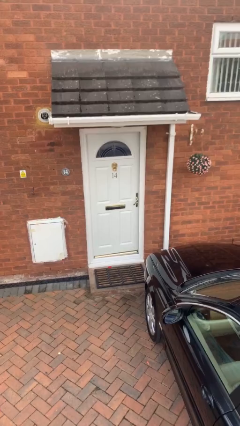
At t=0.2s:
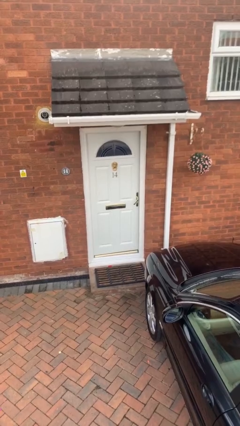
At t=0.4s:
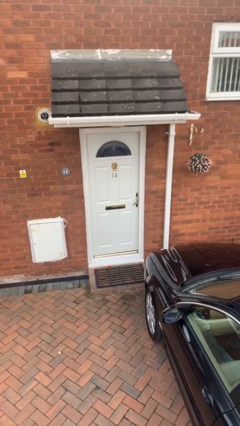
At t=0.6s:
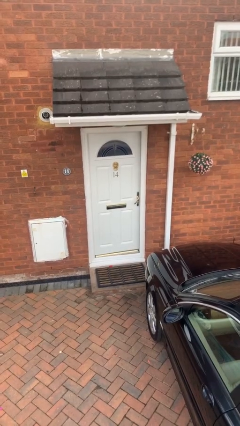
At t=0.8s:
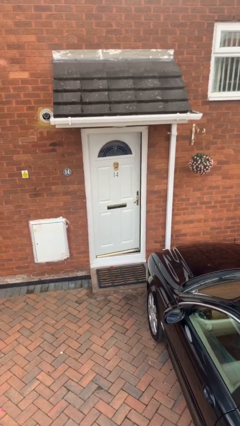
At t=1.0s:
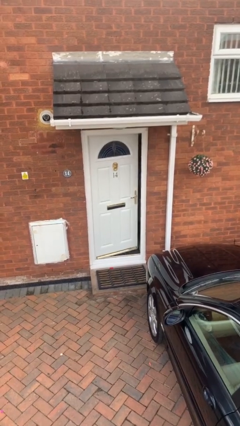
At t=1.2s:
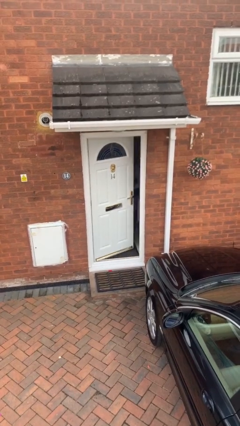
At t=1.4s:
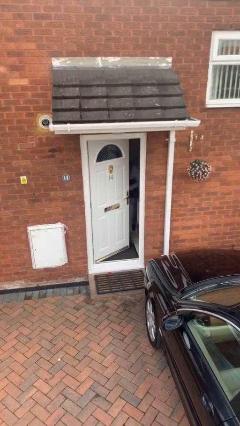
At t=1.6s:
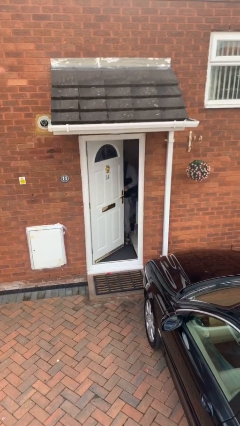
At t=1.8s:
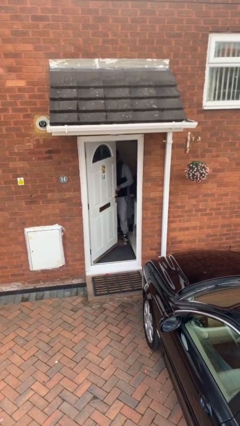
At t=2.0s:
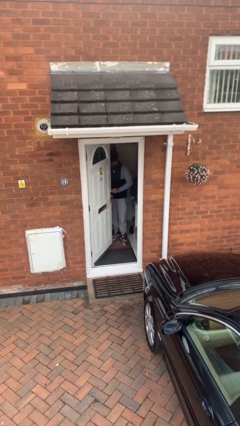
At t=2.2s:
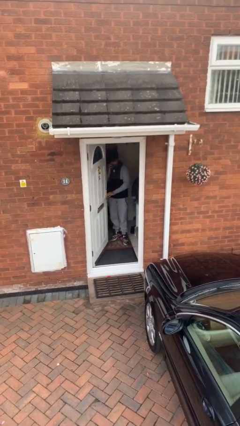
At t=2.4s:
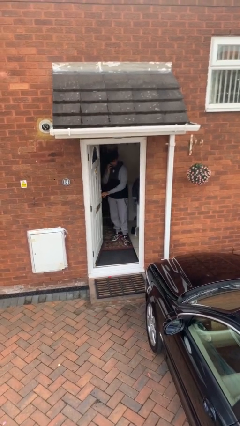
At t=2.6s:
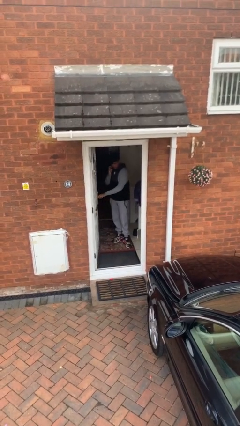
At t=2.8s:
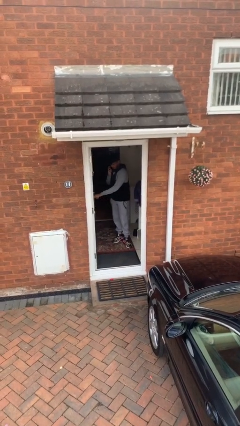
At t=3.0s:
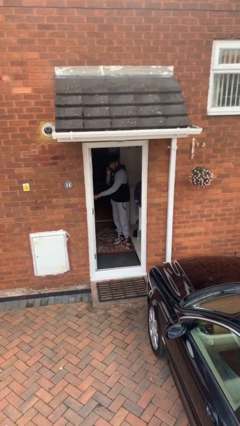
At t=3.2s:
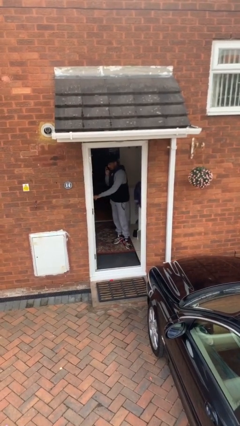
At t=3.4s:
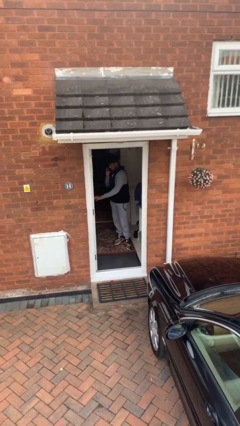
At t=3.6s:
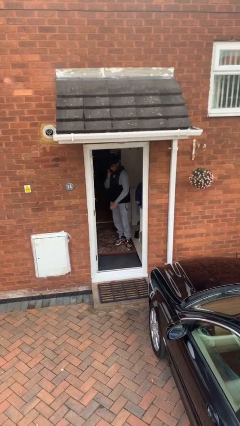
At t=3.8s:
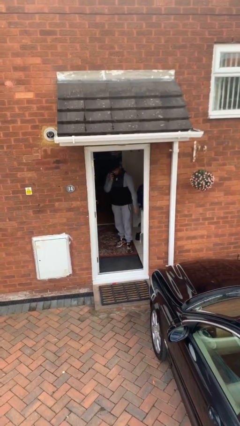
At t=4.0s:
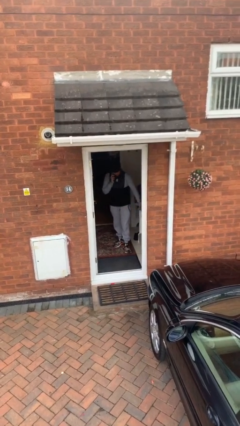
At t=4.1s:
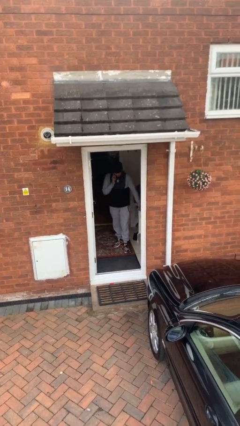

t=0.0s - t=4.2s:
person opens facility door

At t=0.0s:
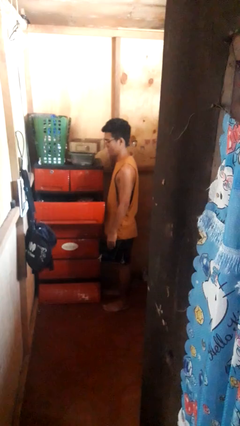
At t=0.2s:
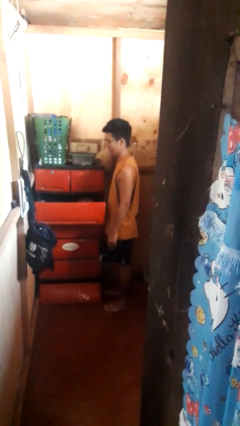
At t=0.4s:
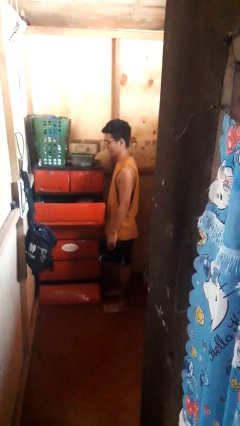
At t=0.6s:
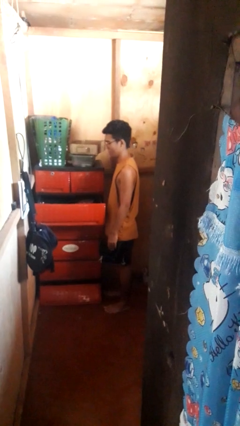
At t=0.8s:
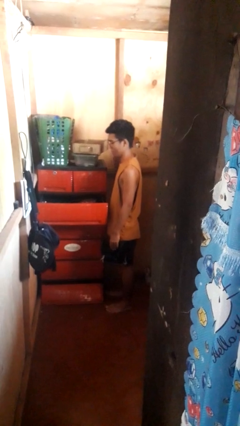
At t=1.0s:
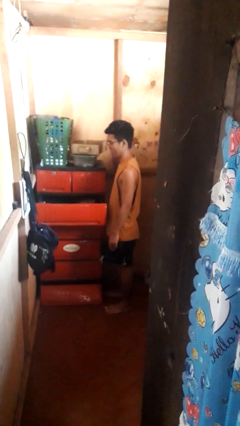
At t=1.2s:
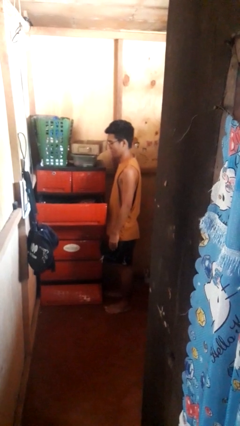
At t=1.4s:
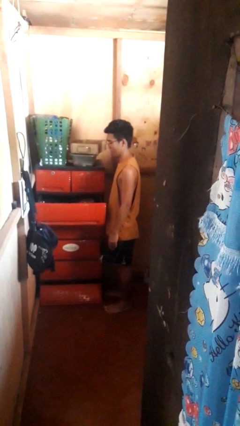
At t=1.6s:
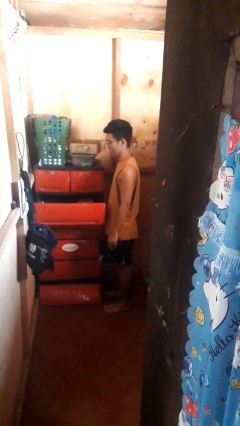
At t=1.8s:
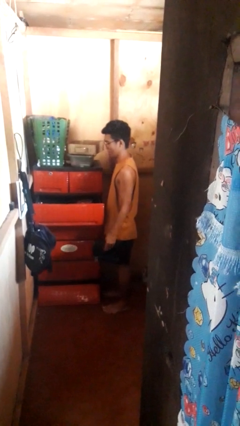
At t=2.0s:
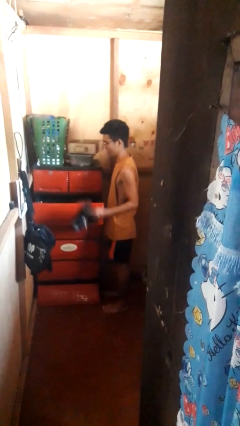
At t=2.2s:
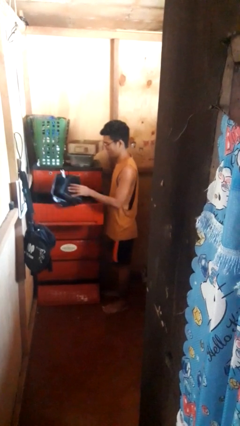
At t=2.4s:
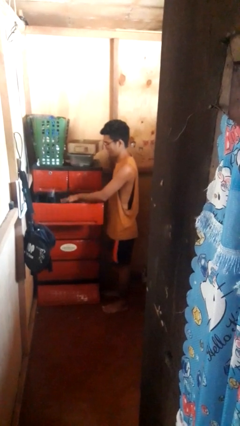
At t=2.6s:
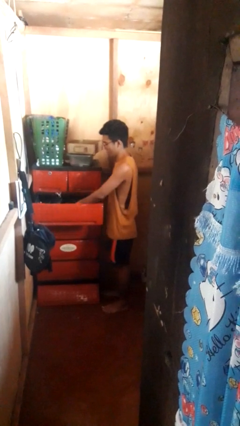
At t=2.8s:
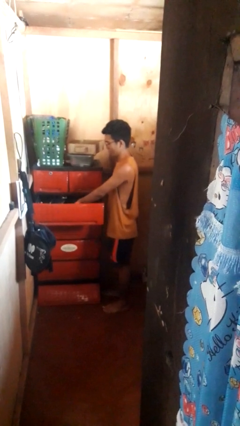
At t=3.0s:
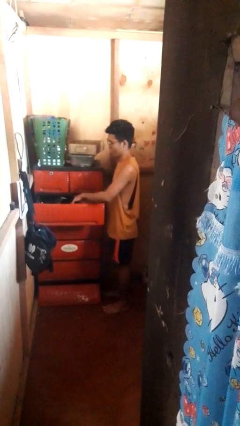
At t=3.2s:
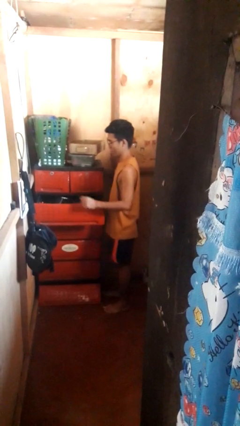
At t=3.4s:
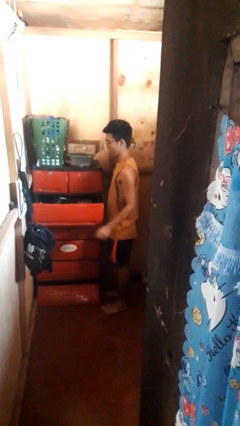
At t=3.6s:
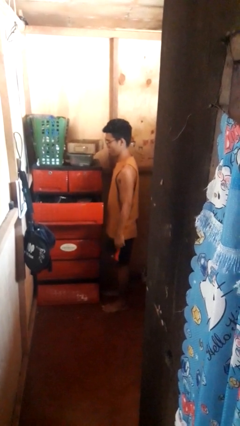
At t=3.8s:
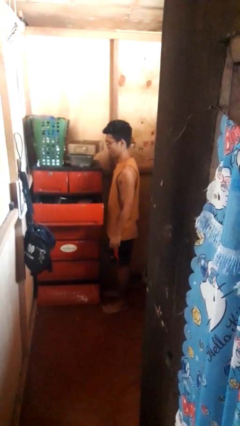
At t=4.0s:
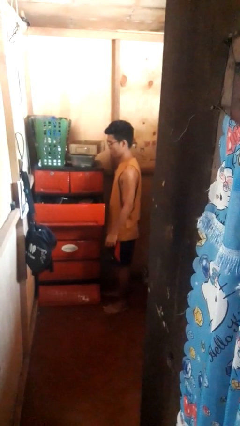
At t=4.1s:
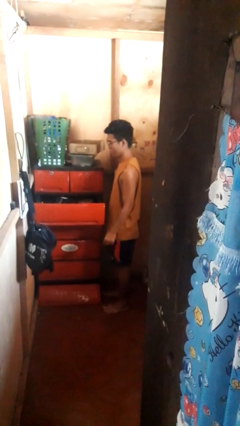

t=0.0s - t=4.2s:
person puts clothes into dresser

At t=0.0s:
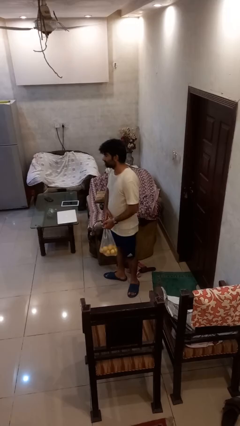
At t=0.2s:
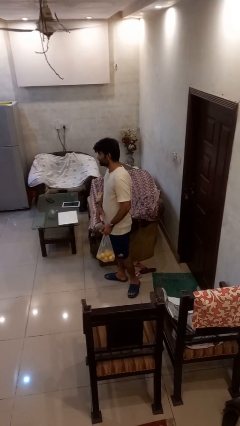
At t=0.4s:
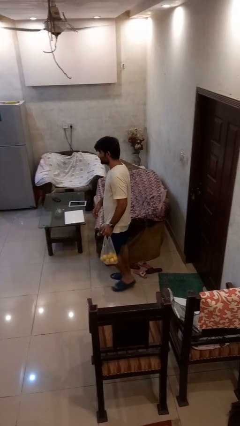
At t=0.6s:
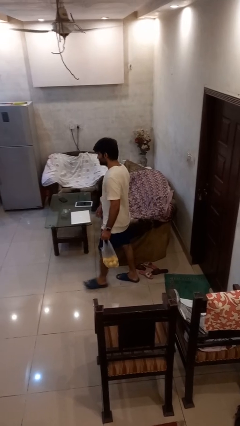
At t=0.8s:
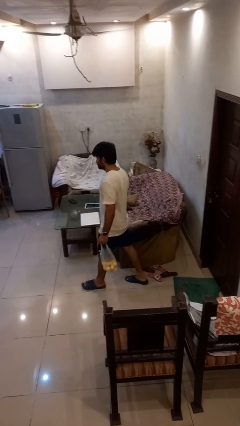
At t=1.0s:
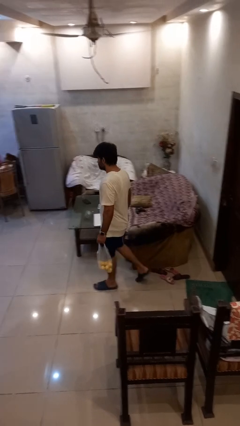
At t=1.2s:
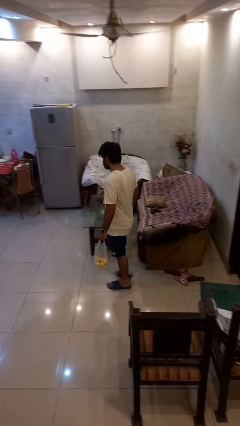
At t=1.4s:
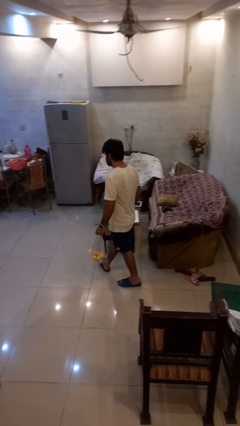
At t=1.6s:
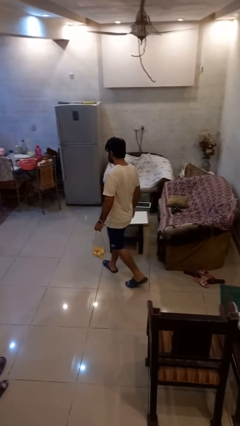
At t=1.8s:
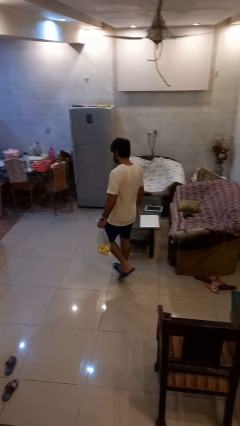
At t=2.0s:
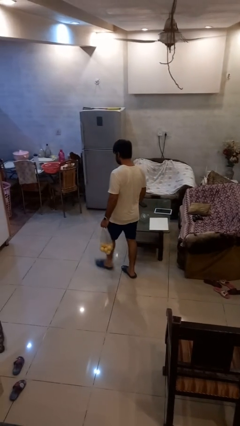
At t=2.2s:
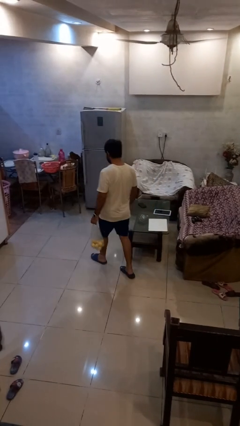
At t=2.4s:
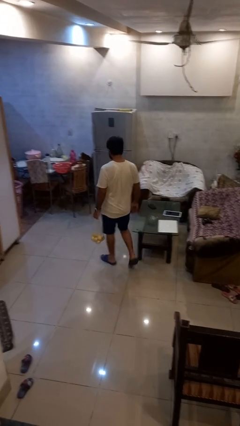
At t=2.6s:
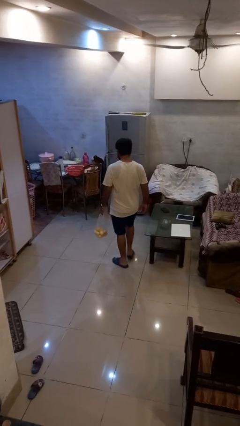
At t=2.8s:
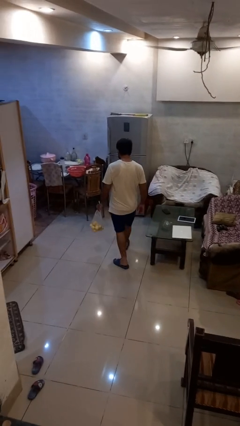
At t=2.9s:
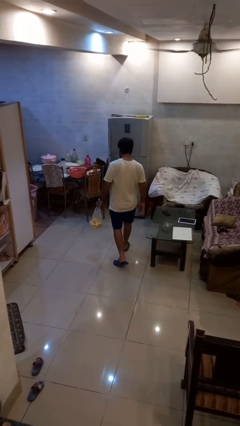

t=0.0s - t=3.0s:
person carries groceries

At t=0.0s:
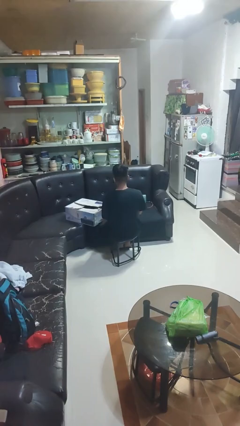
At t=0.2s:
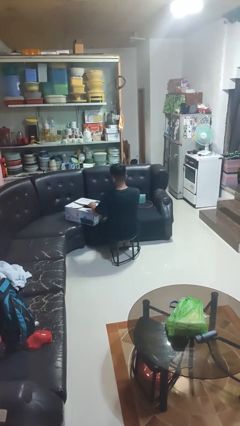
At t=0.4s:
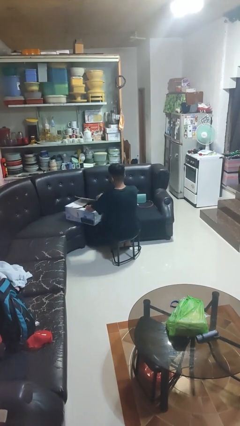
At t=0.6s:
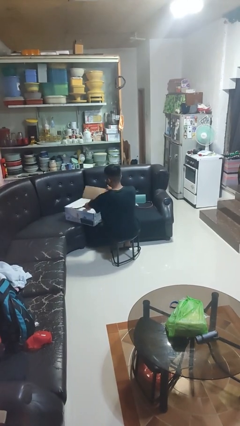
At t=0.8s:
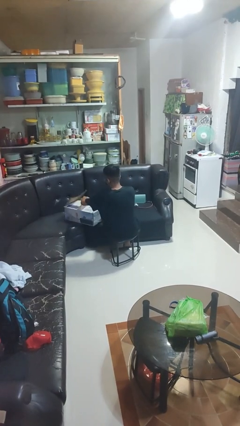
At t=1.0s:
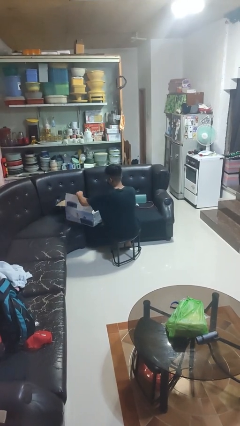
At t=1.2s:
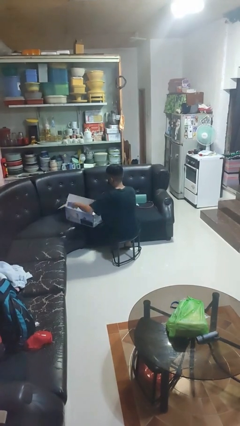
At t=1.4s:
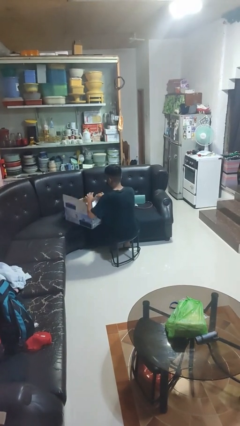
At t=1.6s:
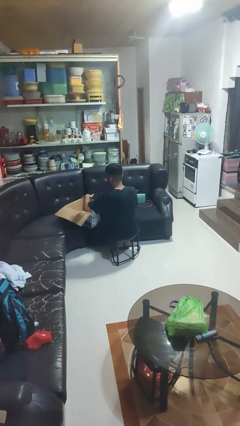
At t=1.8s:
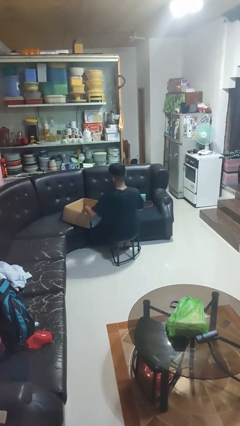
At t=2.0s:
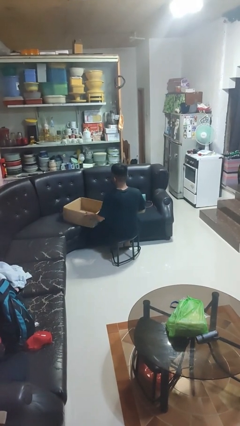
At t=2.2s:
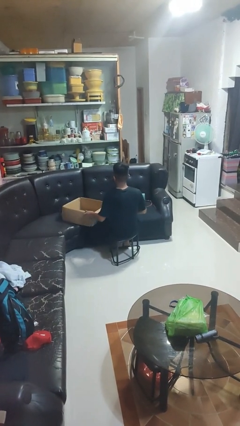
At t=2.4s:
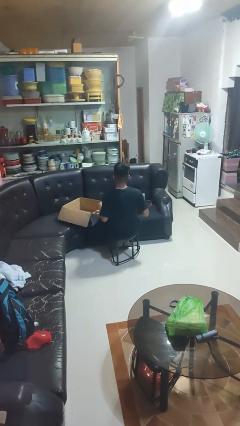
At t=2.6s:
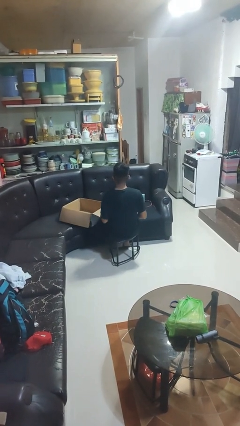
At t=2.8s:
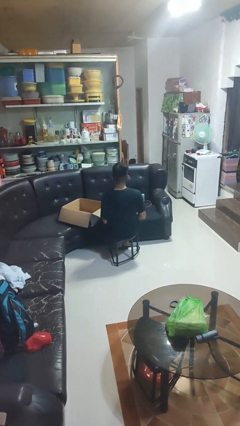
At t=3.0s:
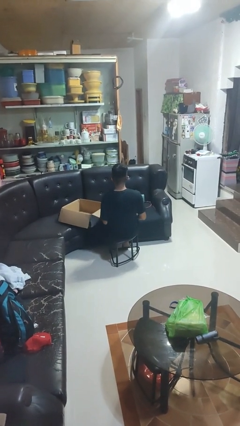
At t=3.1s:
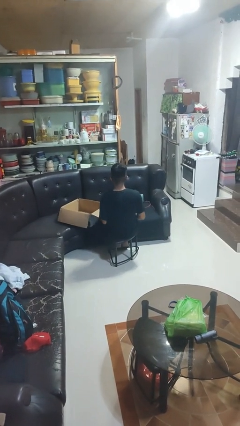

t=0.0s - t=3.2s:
person opens box

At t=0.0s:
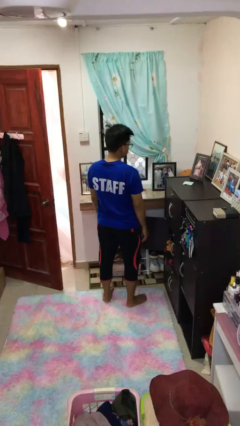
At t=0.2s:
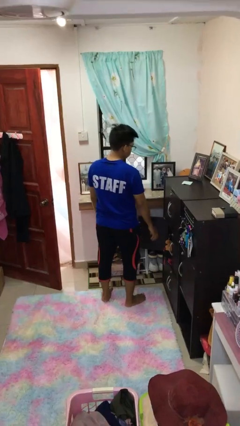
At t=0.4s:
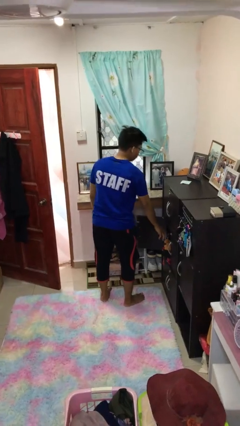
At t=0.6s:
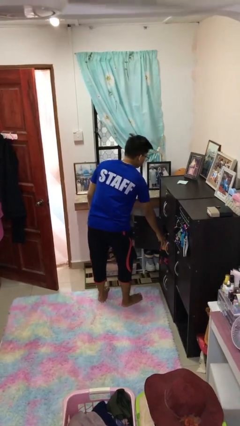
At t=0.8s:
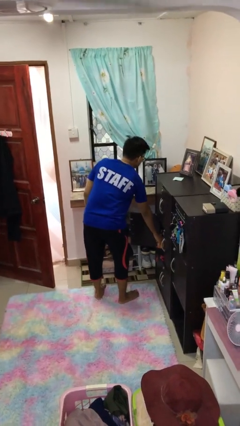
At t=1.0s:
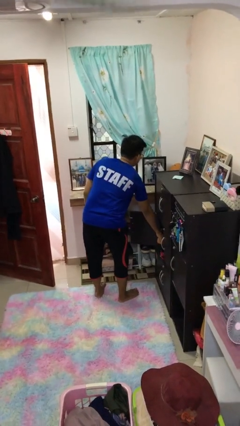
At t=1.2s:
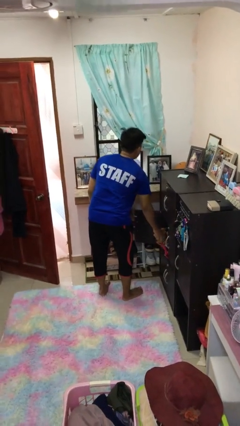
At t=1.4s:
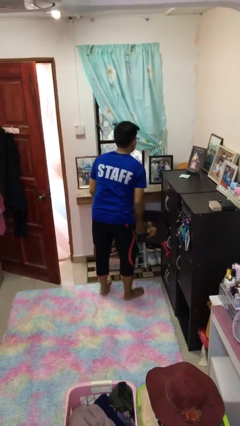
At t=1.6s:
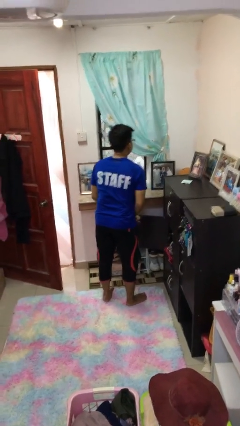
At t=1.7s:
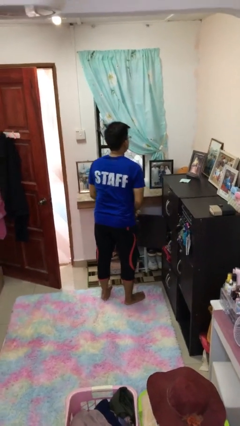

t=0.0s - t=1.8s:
person picks up object from cabinet

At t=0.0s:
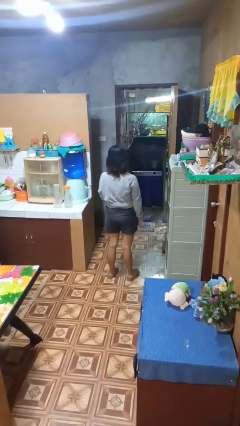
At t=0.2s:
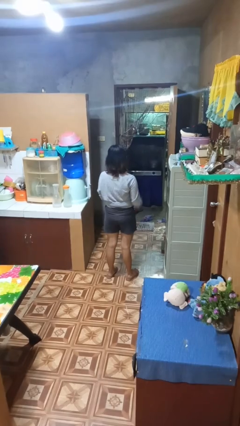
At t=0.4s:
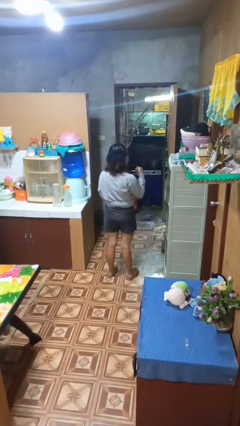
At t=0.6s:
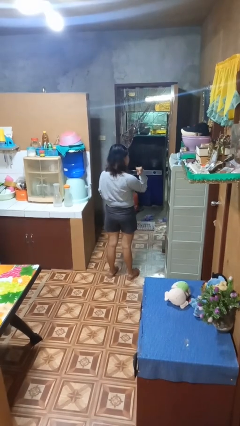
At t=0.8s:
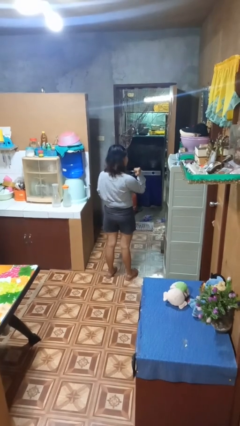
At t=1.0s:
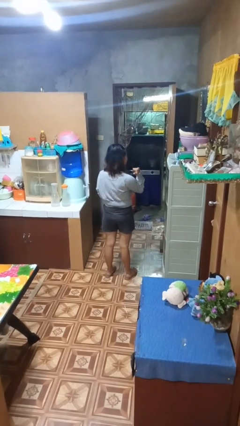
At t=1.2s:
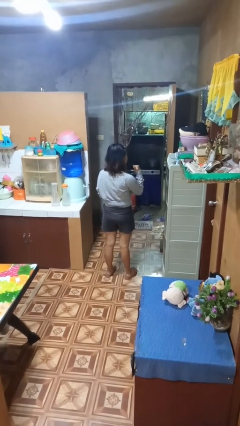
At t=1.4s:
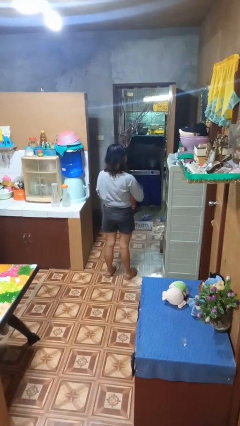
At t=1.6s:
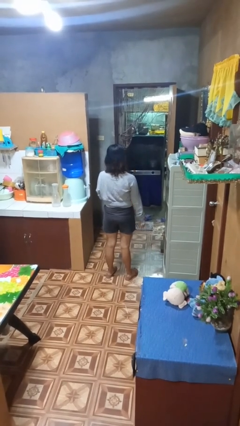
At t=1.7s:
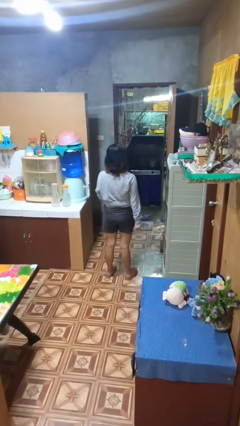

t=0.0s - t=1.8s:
person gestures behind me
